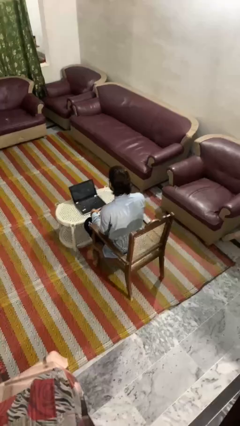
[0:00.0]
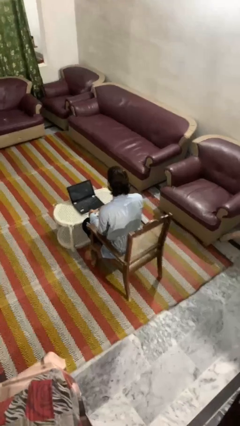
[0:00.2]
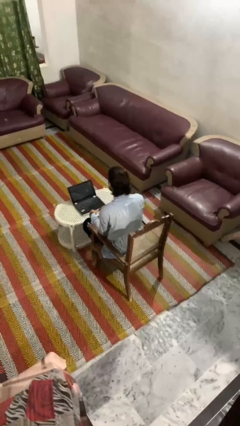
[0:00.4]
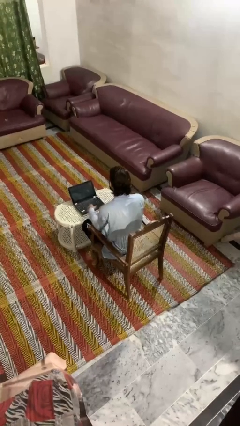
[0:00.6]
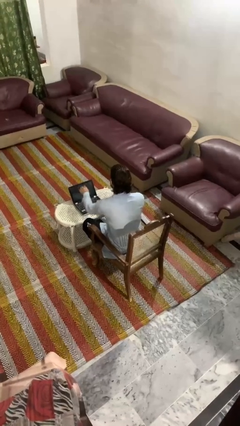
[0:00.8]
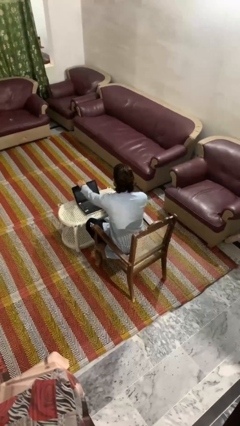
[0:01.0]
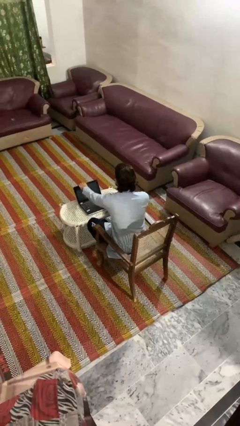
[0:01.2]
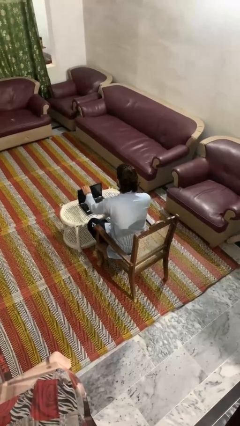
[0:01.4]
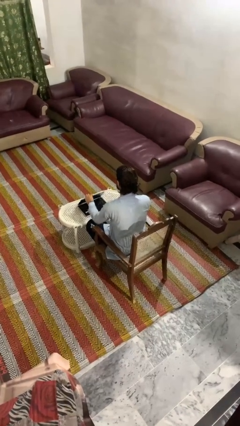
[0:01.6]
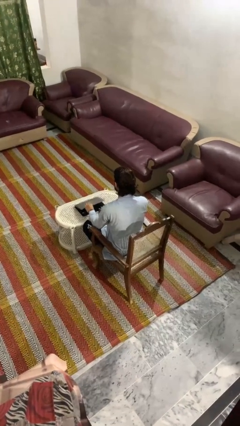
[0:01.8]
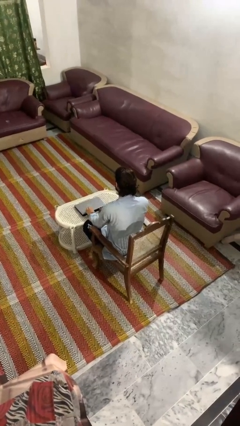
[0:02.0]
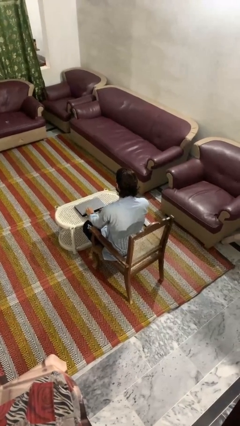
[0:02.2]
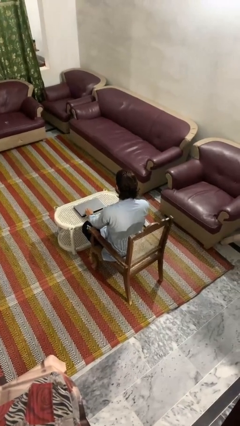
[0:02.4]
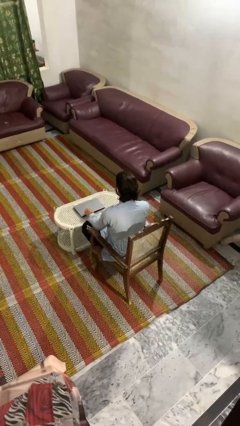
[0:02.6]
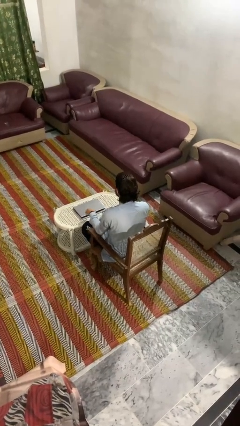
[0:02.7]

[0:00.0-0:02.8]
person closes laptop

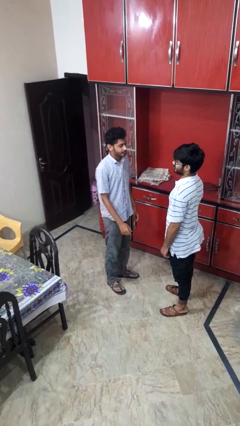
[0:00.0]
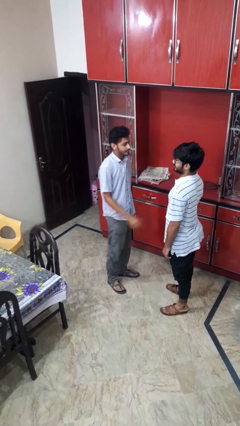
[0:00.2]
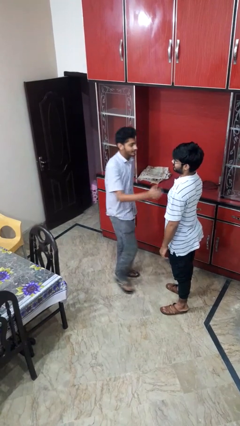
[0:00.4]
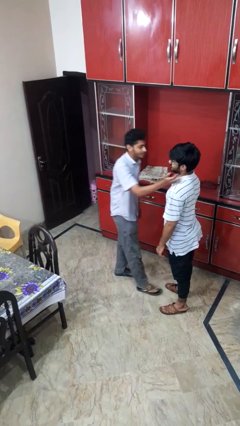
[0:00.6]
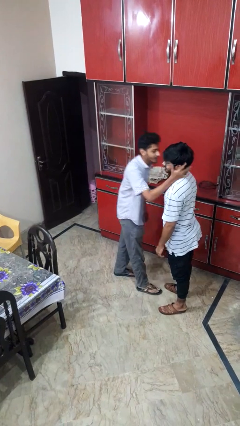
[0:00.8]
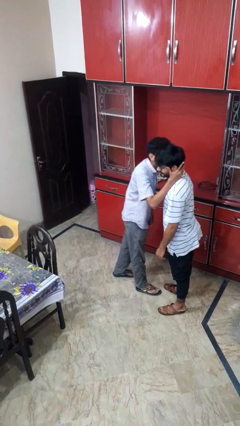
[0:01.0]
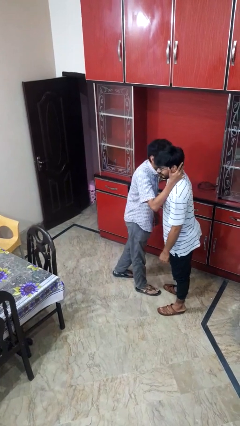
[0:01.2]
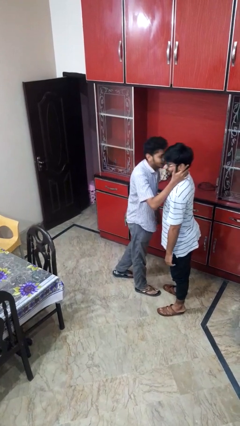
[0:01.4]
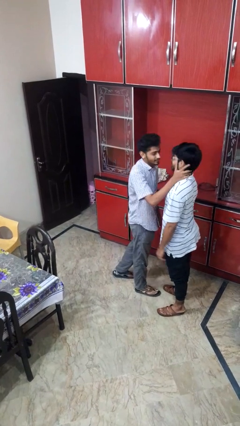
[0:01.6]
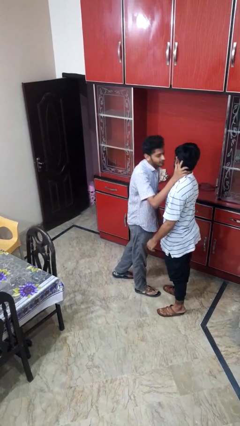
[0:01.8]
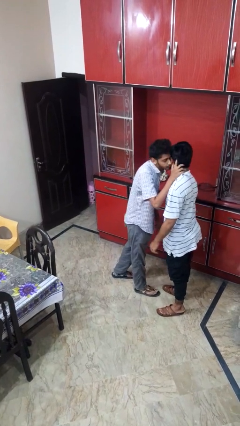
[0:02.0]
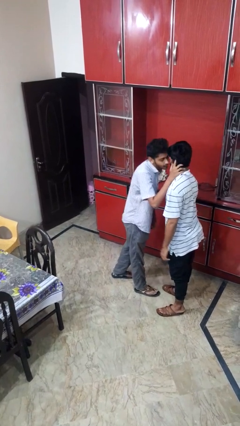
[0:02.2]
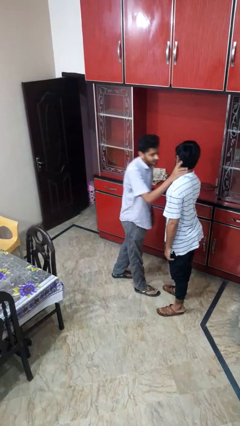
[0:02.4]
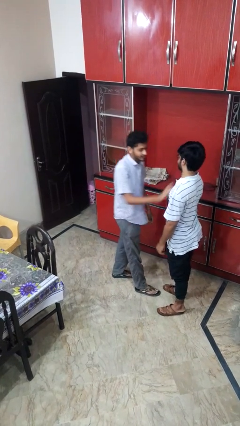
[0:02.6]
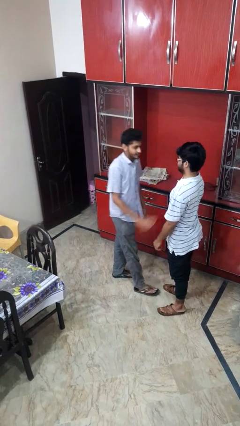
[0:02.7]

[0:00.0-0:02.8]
person kisses cheek of person

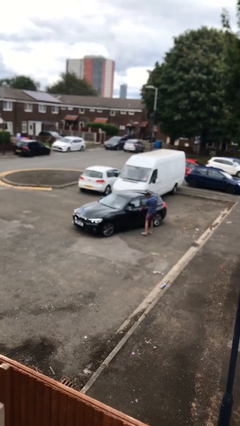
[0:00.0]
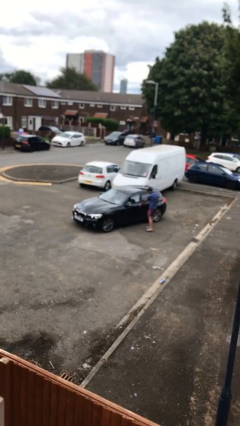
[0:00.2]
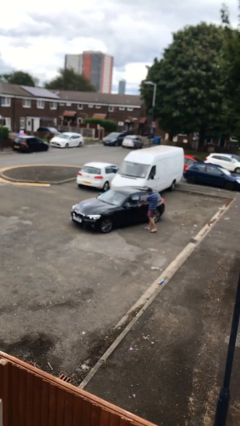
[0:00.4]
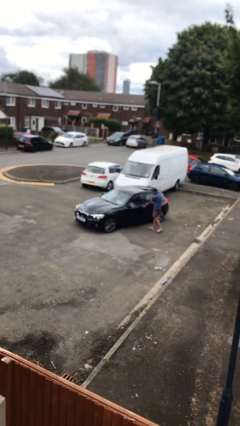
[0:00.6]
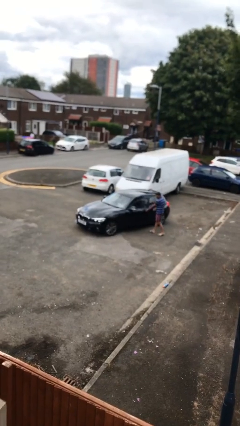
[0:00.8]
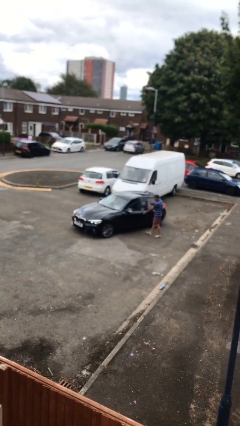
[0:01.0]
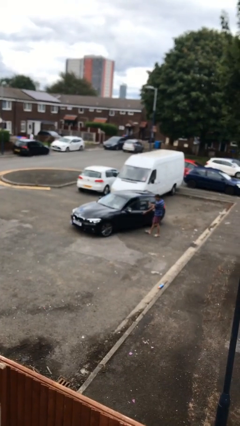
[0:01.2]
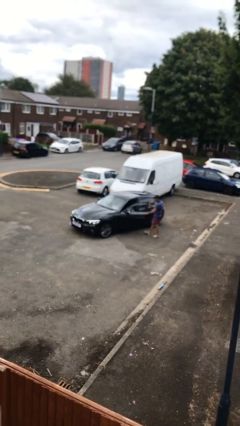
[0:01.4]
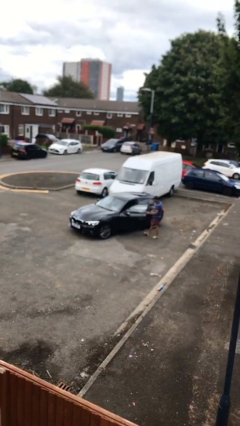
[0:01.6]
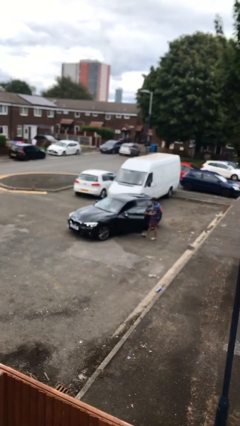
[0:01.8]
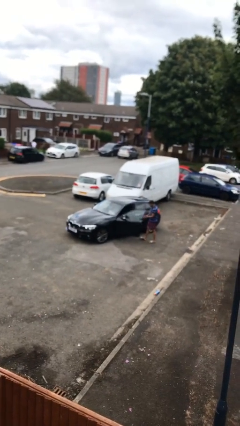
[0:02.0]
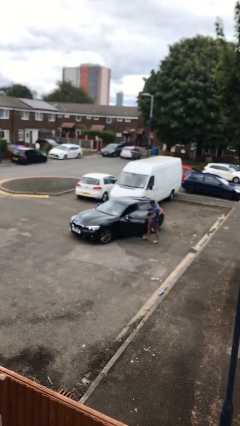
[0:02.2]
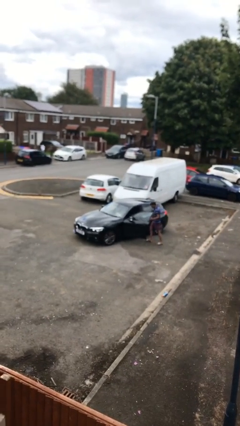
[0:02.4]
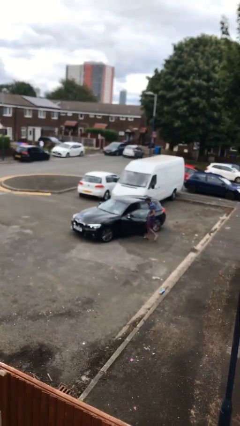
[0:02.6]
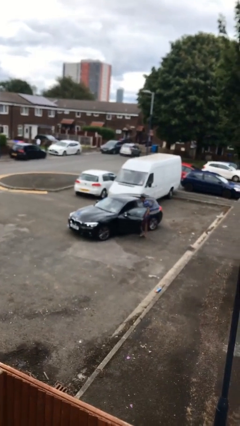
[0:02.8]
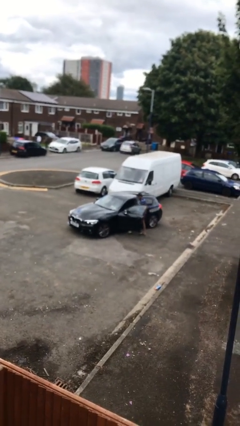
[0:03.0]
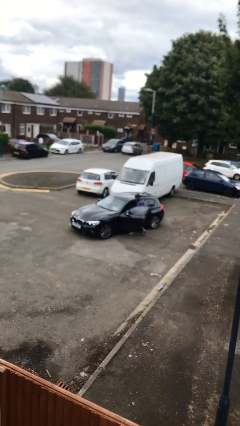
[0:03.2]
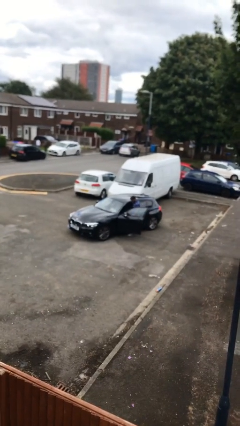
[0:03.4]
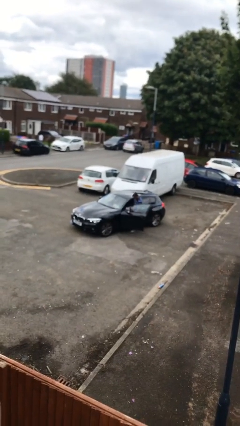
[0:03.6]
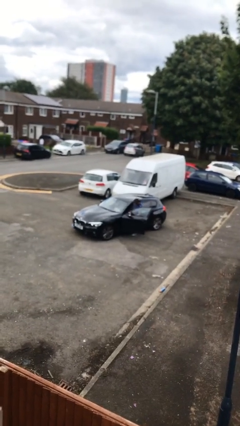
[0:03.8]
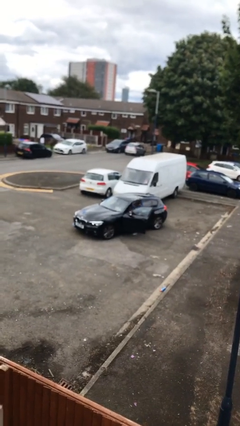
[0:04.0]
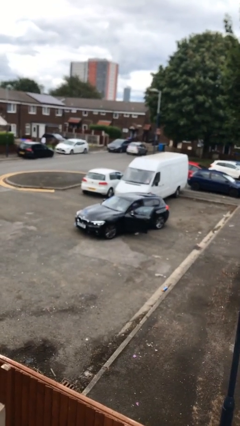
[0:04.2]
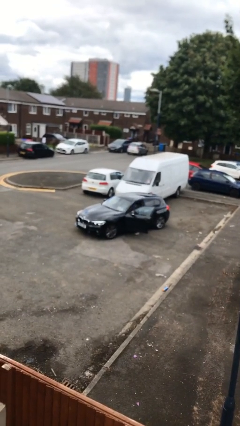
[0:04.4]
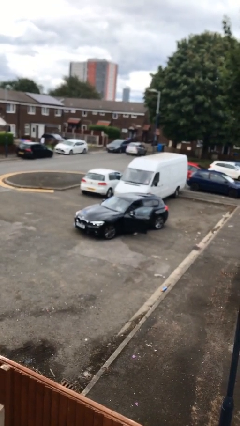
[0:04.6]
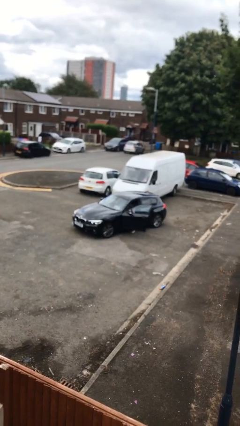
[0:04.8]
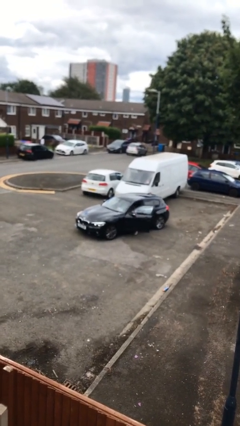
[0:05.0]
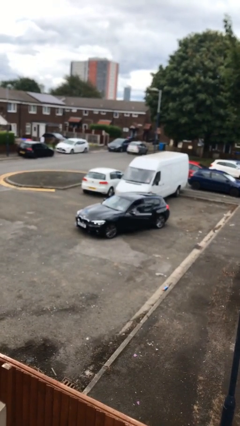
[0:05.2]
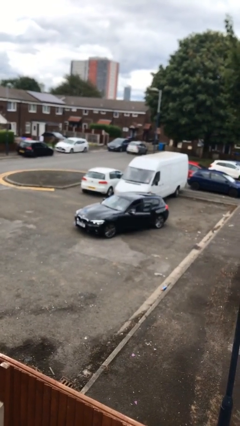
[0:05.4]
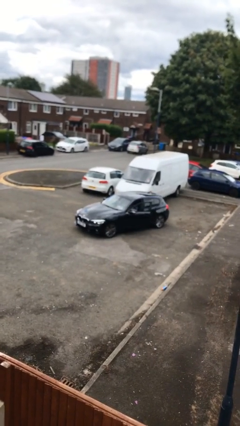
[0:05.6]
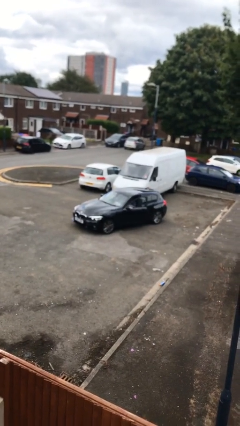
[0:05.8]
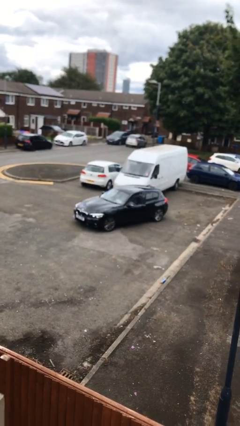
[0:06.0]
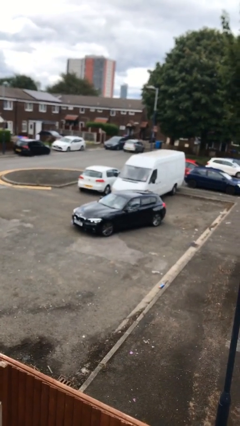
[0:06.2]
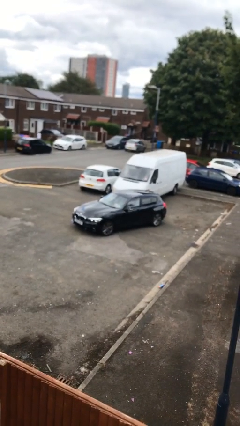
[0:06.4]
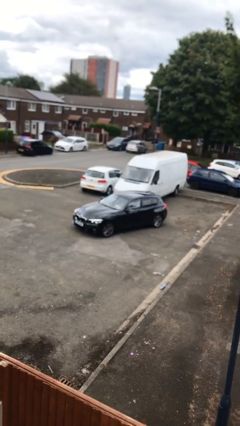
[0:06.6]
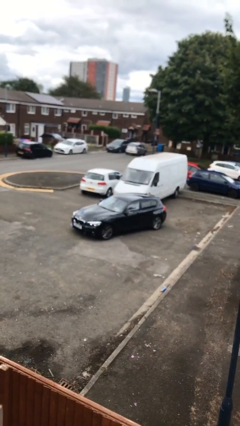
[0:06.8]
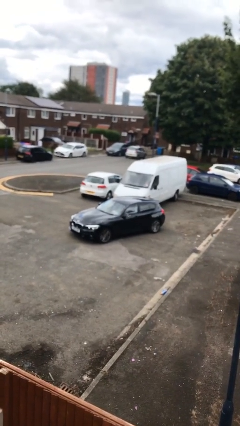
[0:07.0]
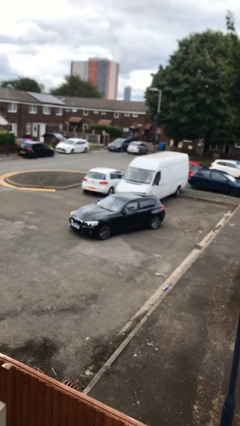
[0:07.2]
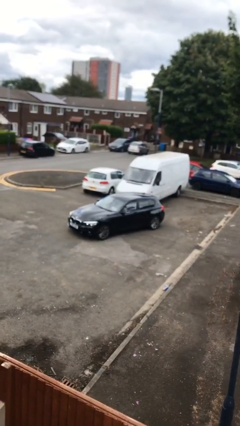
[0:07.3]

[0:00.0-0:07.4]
car picks up person

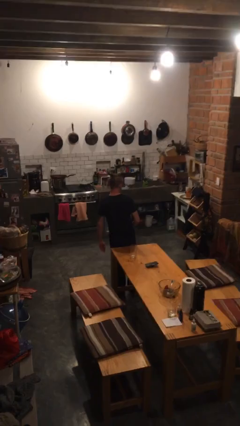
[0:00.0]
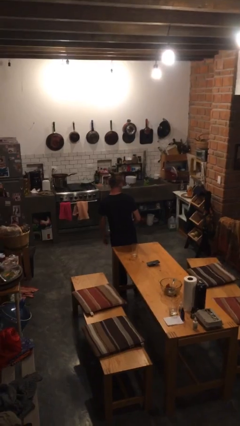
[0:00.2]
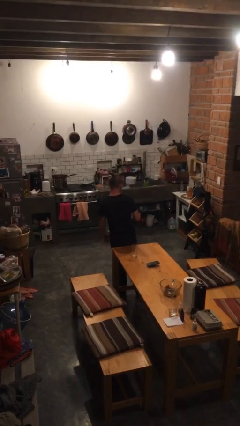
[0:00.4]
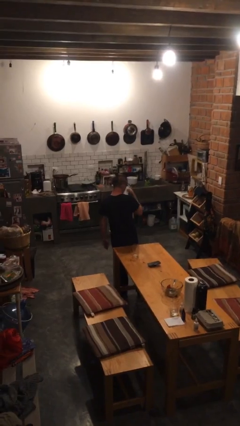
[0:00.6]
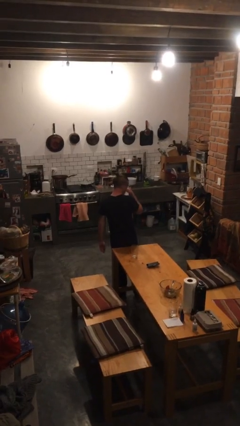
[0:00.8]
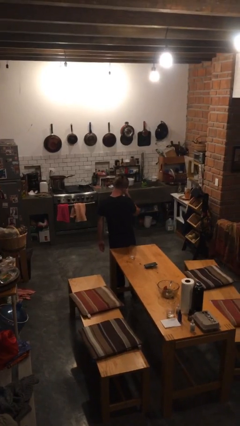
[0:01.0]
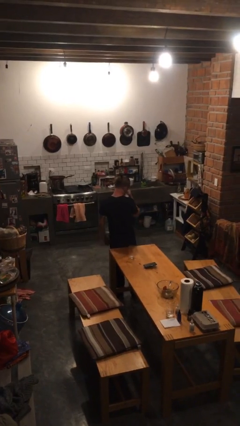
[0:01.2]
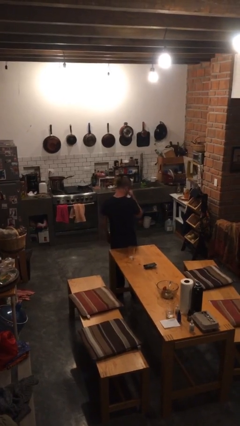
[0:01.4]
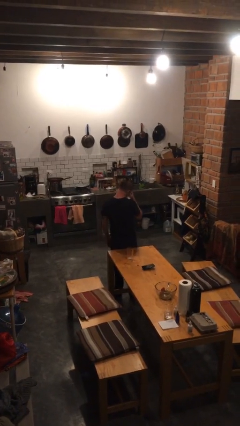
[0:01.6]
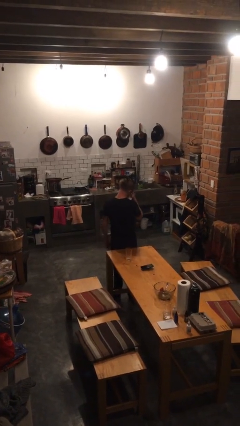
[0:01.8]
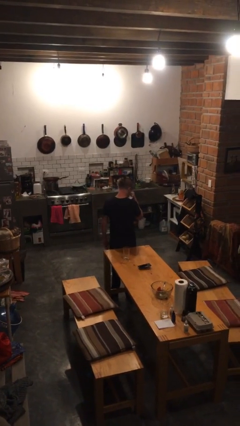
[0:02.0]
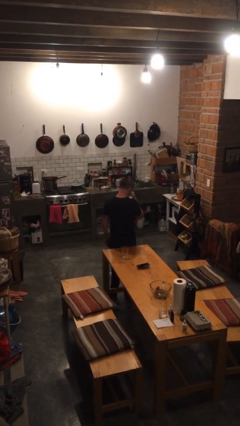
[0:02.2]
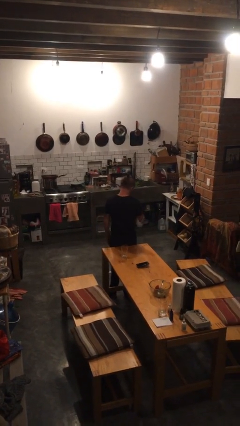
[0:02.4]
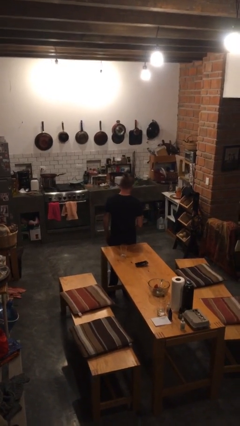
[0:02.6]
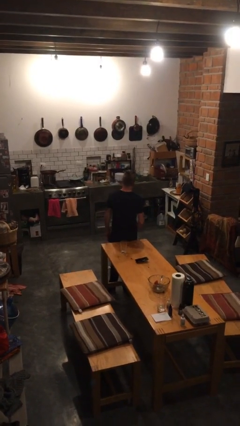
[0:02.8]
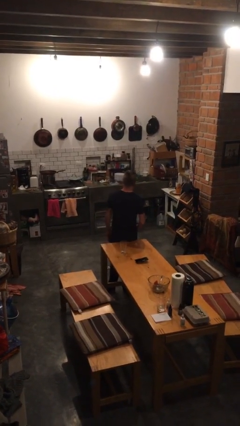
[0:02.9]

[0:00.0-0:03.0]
person blows nose

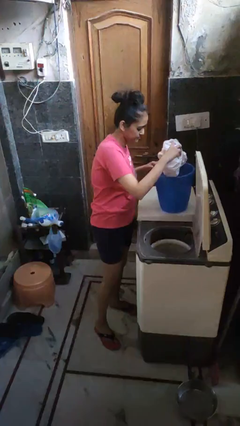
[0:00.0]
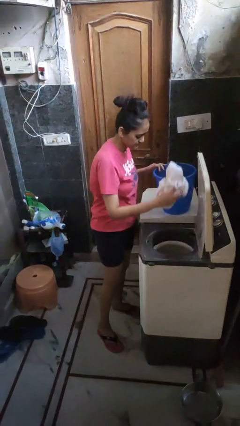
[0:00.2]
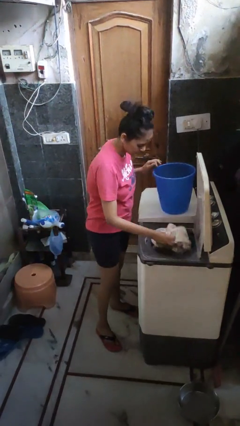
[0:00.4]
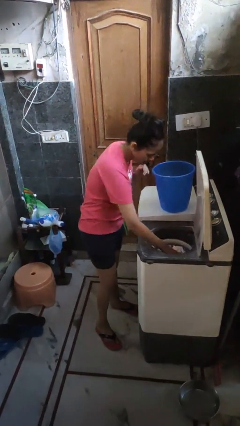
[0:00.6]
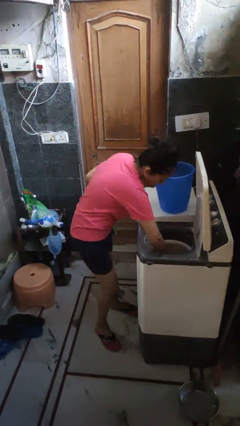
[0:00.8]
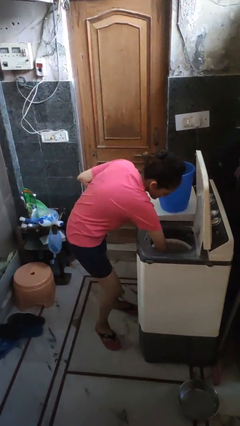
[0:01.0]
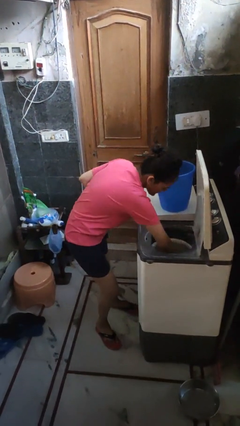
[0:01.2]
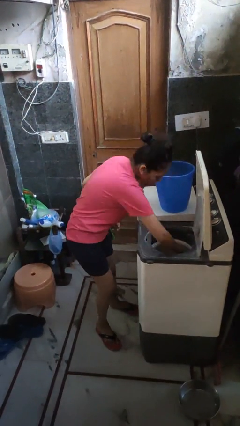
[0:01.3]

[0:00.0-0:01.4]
person puts clothes into dresser
